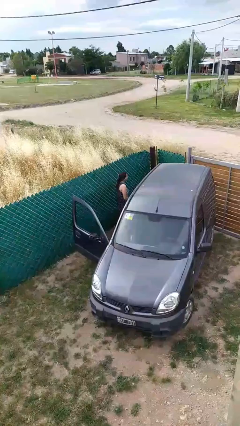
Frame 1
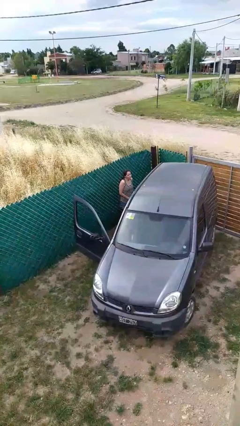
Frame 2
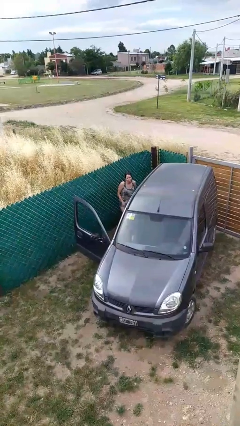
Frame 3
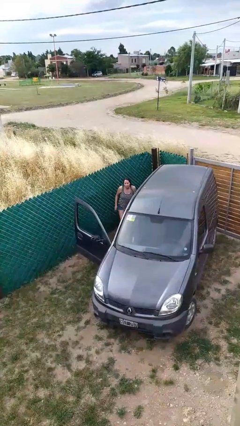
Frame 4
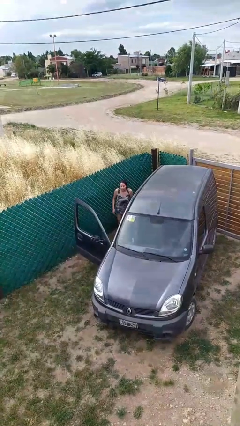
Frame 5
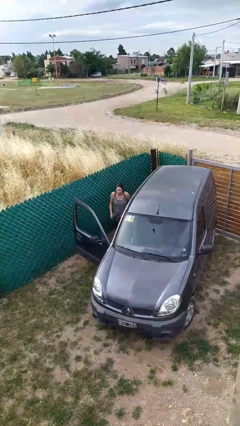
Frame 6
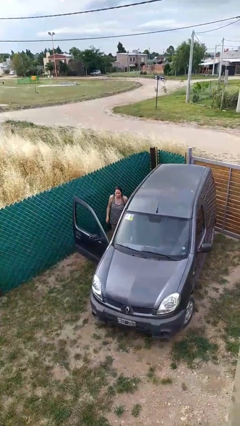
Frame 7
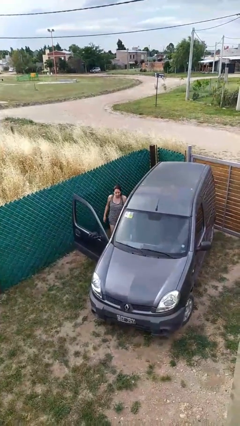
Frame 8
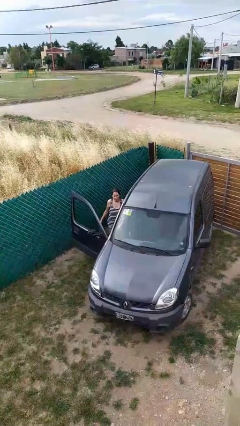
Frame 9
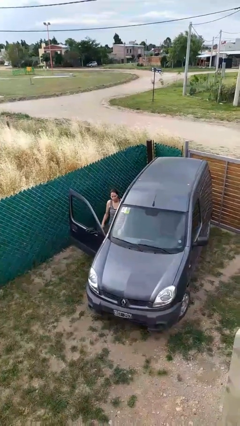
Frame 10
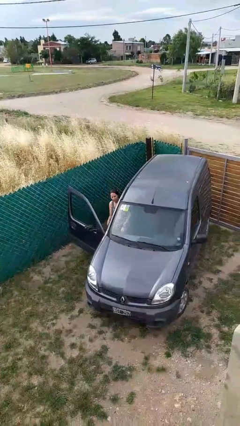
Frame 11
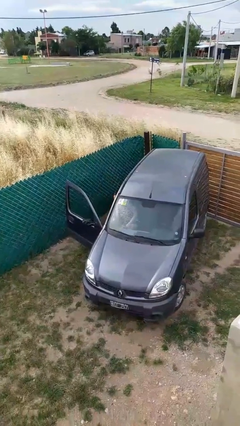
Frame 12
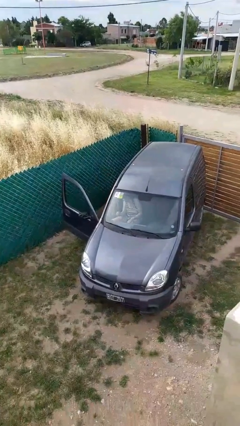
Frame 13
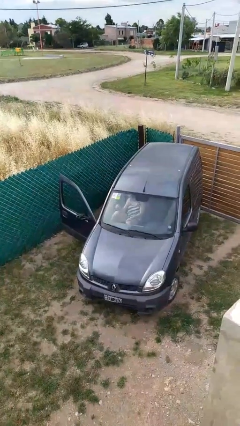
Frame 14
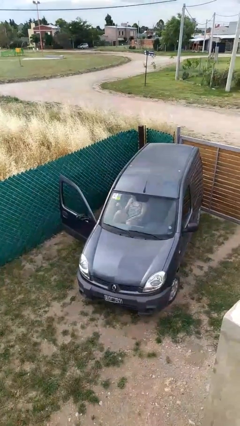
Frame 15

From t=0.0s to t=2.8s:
person enters car

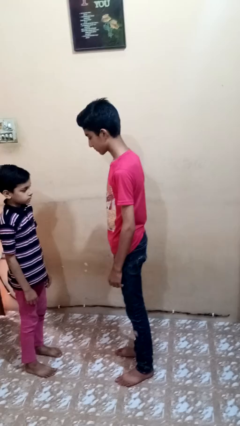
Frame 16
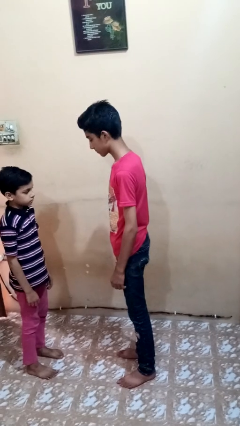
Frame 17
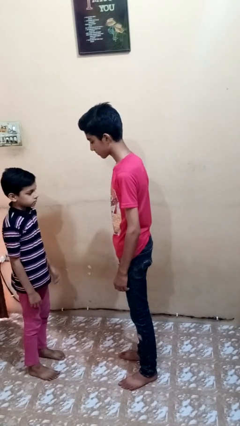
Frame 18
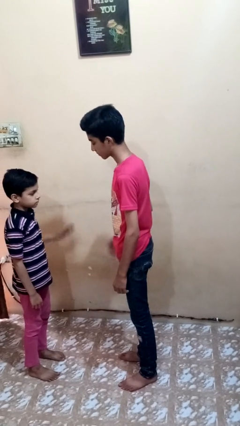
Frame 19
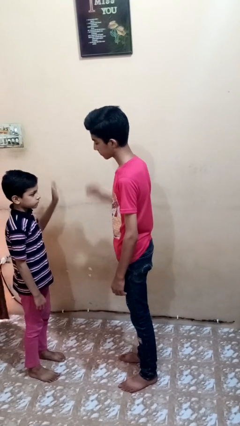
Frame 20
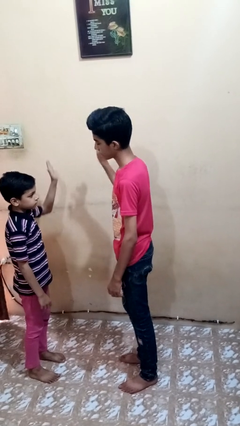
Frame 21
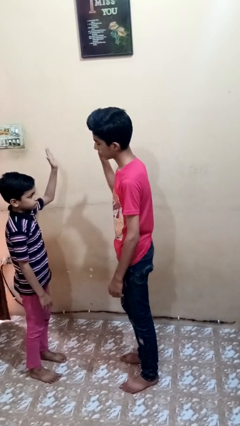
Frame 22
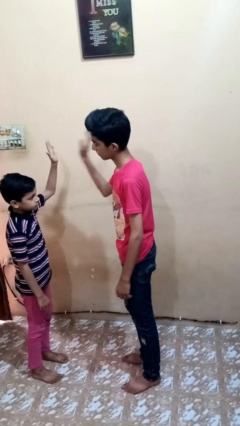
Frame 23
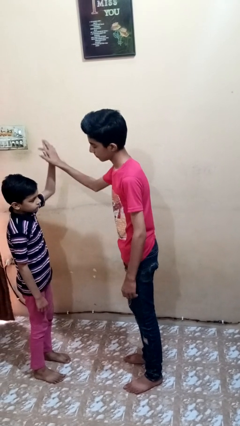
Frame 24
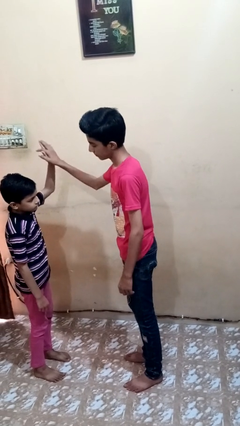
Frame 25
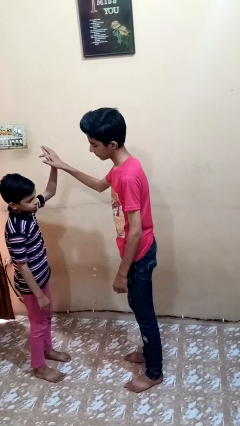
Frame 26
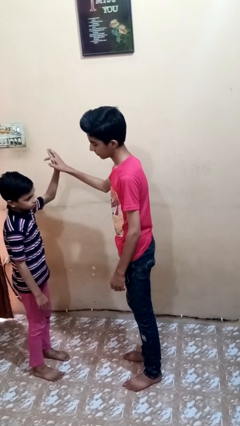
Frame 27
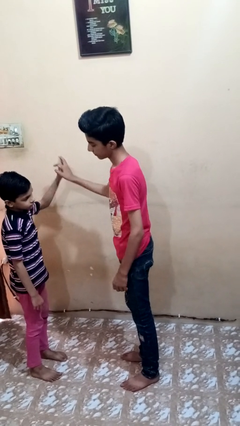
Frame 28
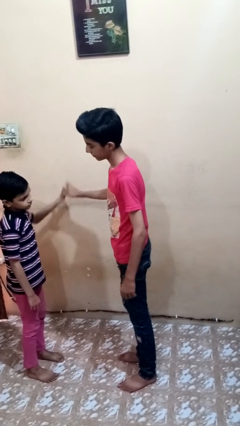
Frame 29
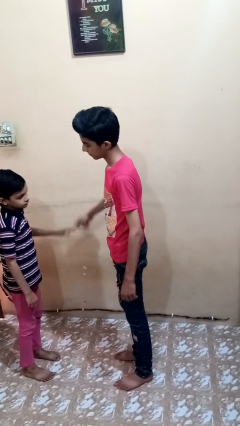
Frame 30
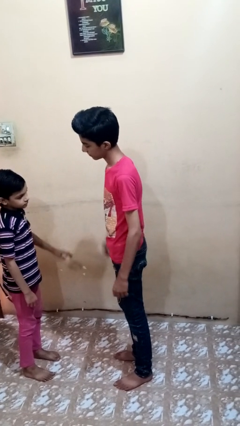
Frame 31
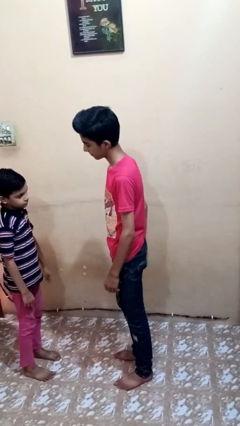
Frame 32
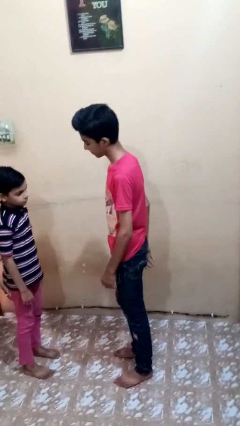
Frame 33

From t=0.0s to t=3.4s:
person highfives hand

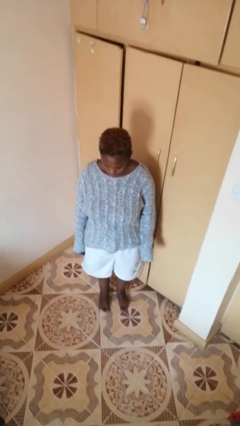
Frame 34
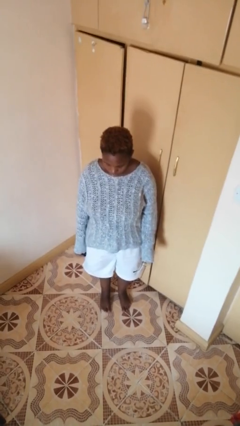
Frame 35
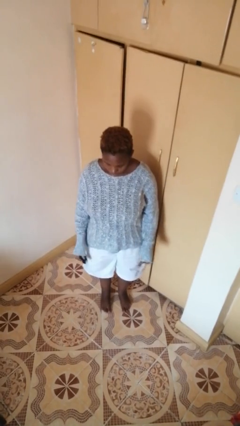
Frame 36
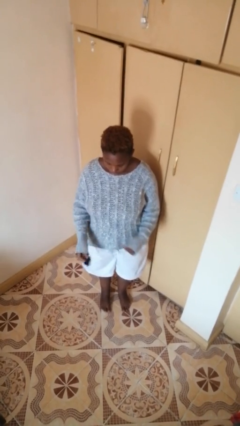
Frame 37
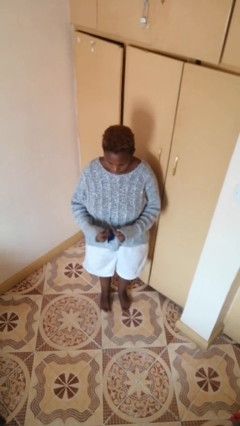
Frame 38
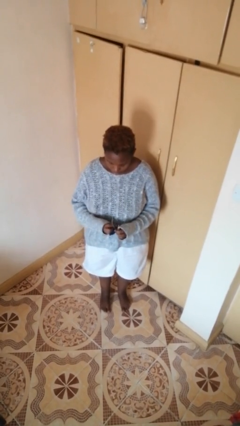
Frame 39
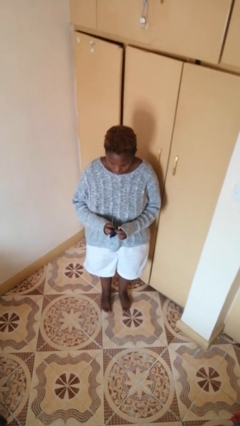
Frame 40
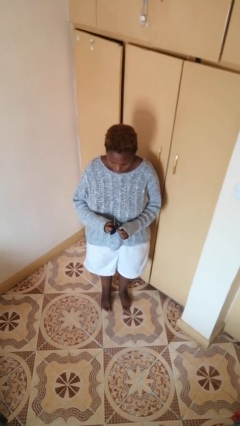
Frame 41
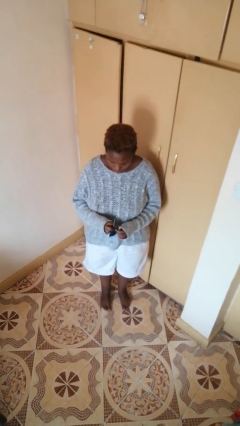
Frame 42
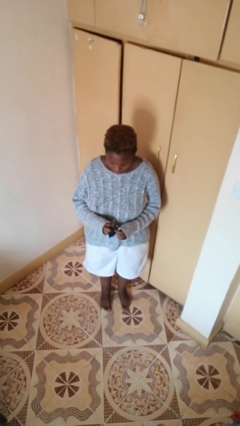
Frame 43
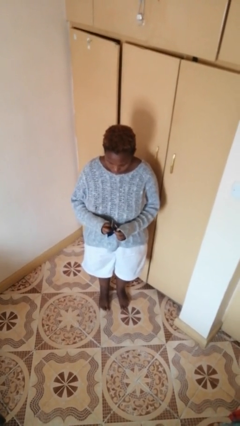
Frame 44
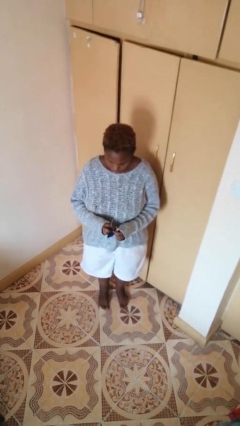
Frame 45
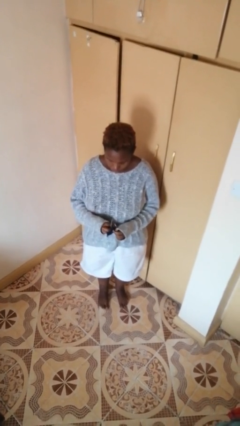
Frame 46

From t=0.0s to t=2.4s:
person cleans eyeglasses

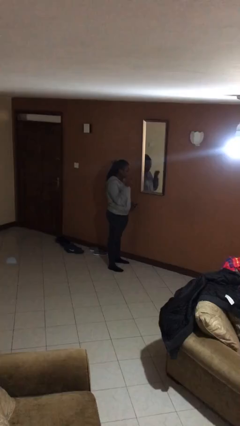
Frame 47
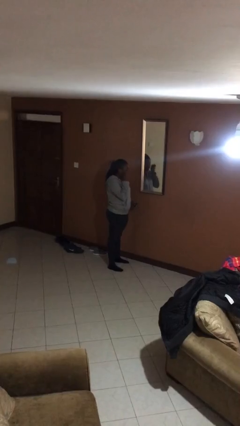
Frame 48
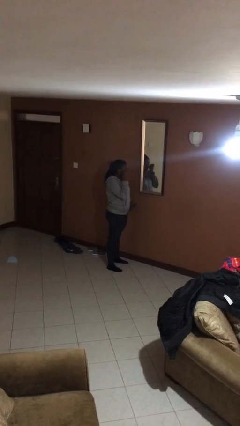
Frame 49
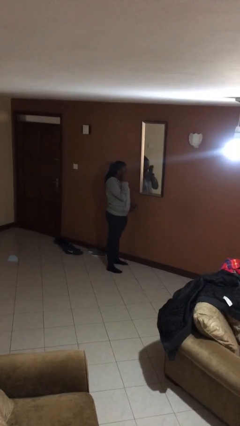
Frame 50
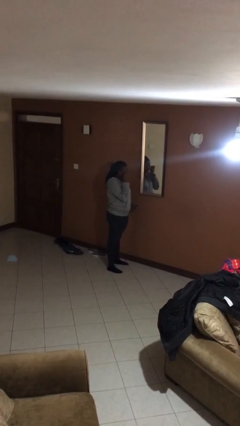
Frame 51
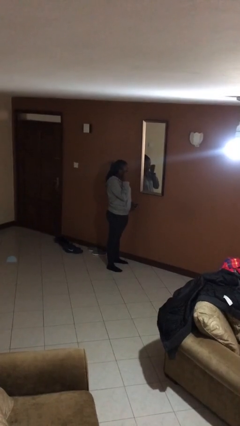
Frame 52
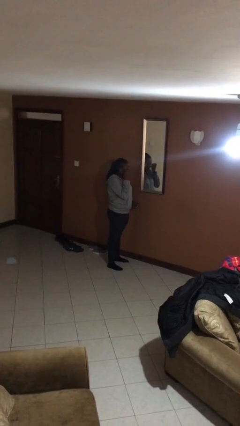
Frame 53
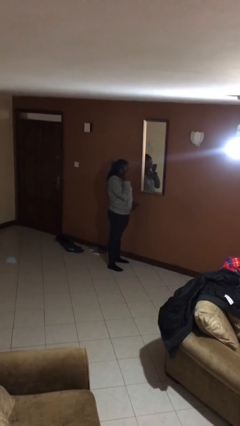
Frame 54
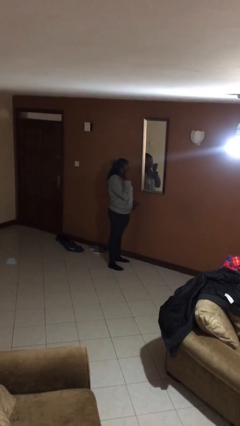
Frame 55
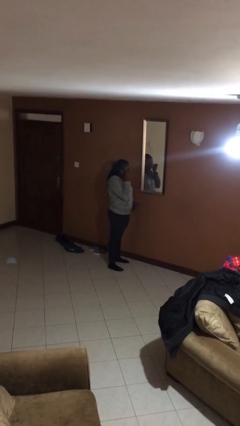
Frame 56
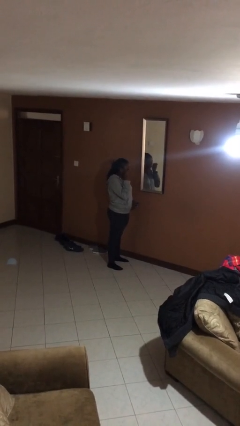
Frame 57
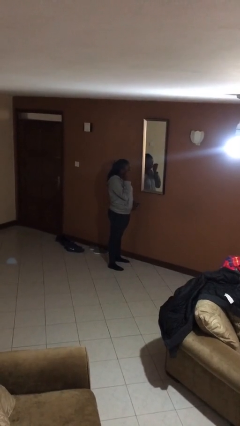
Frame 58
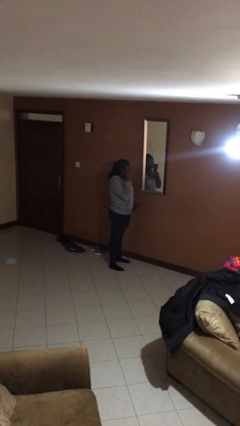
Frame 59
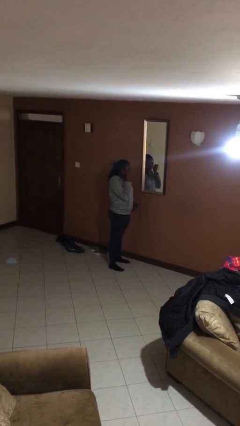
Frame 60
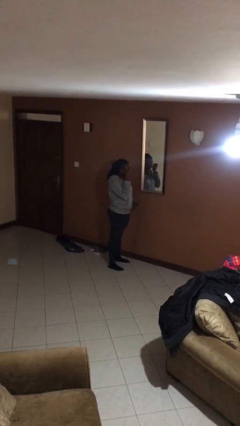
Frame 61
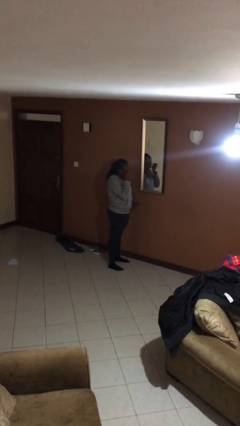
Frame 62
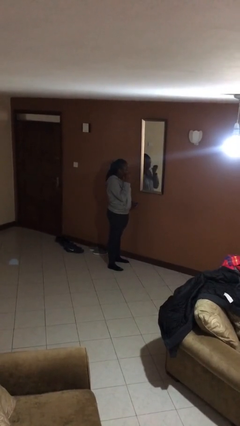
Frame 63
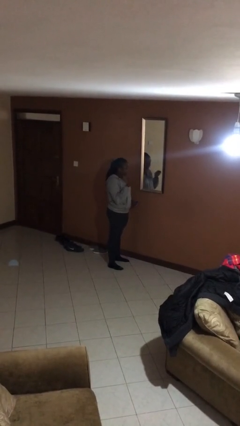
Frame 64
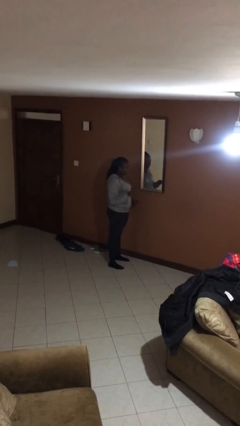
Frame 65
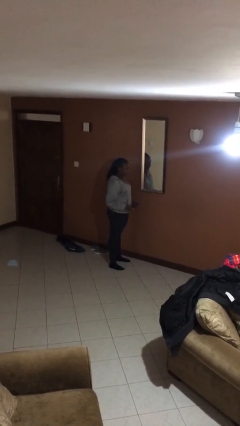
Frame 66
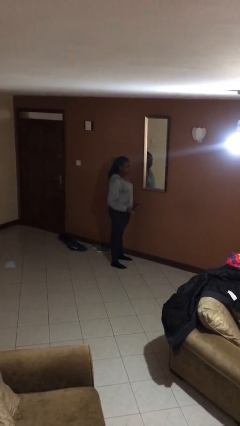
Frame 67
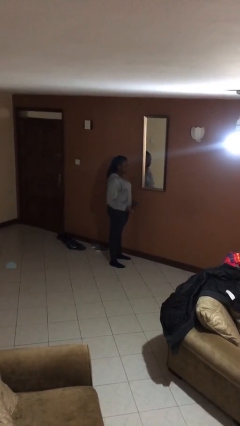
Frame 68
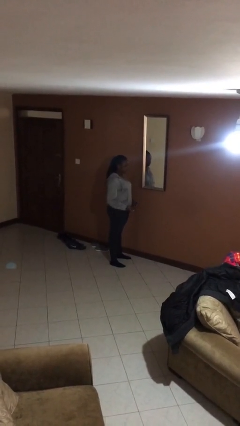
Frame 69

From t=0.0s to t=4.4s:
person applies eye makeup

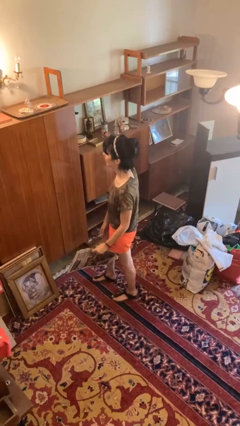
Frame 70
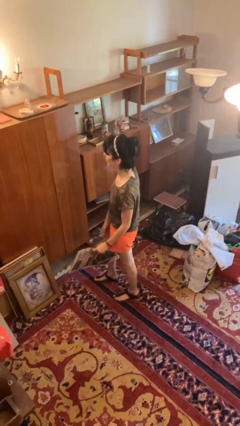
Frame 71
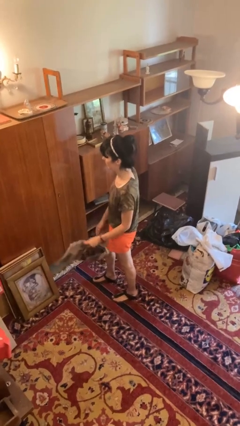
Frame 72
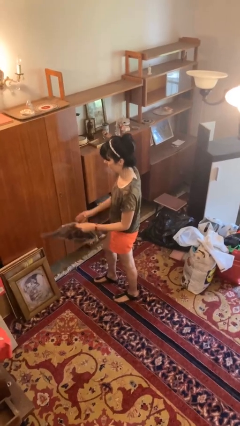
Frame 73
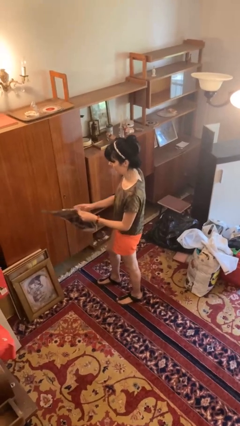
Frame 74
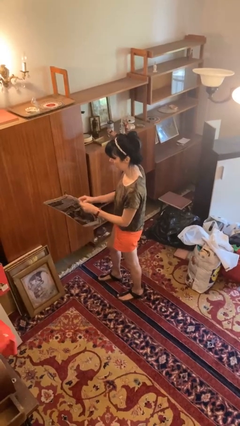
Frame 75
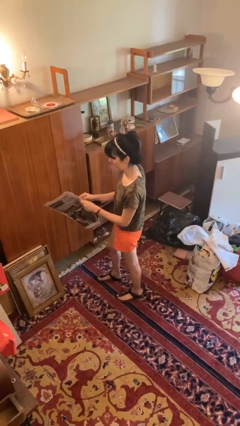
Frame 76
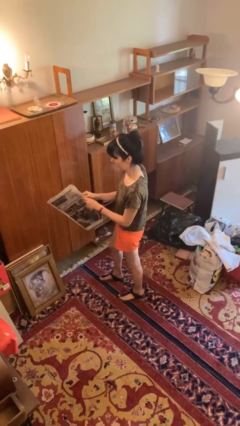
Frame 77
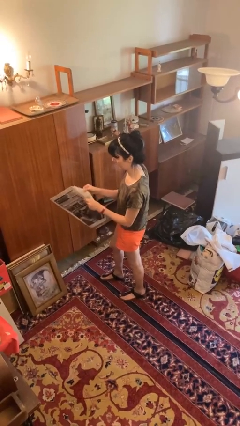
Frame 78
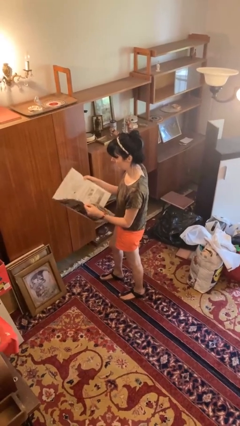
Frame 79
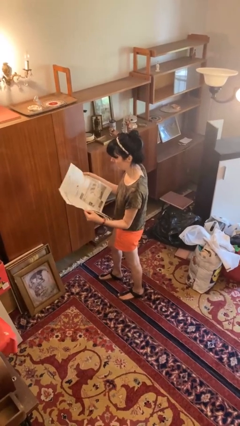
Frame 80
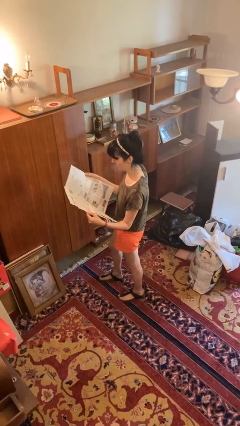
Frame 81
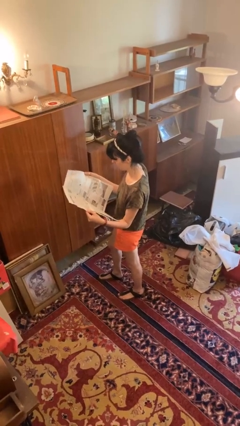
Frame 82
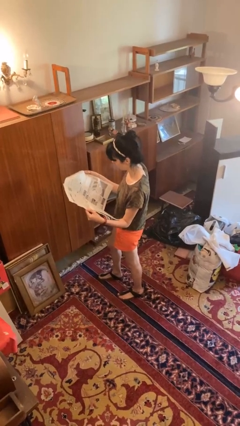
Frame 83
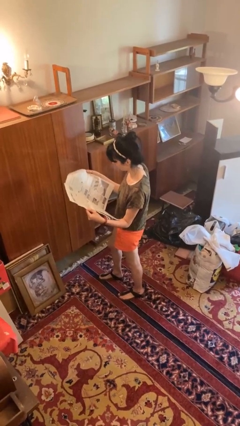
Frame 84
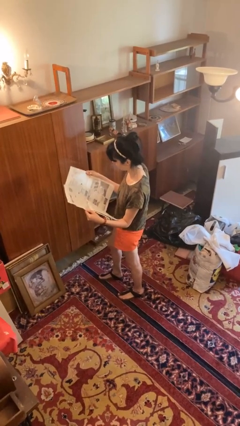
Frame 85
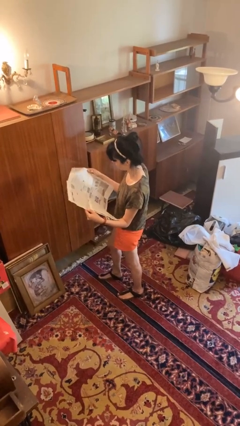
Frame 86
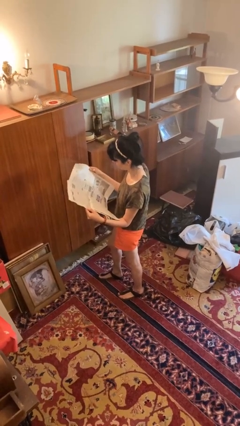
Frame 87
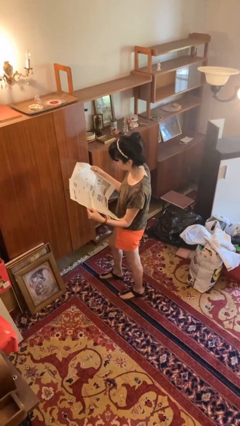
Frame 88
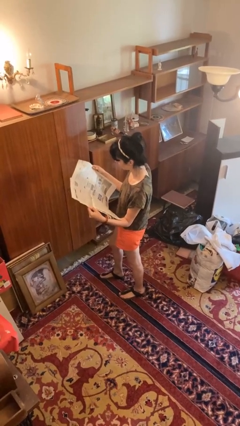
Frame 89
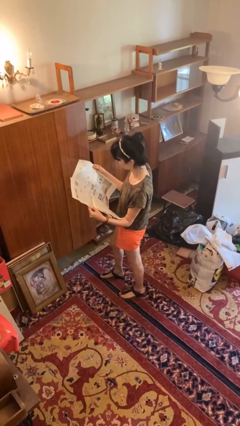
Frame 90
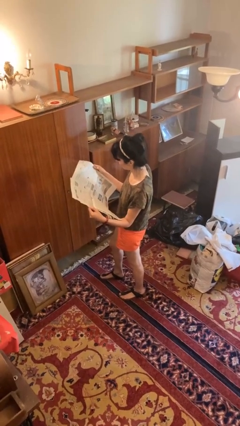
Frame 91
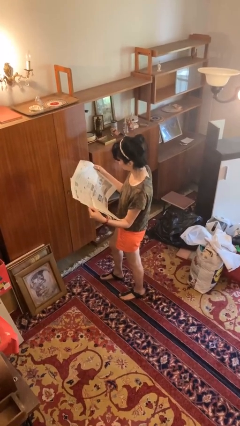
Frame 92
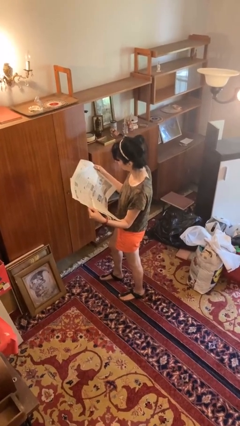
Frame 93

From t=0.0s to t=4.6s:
person reads newspaper
